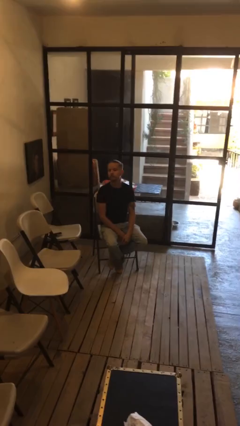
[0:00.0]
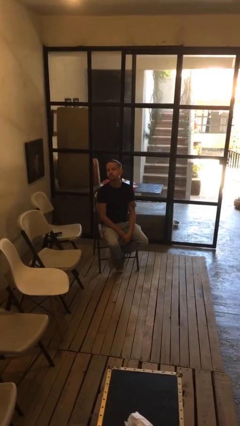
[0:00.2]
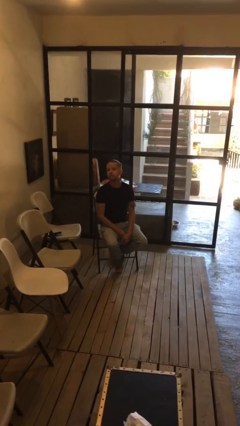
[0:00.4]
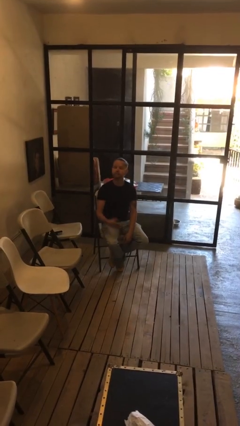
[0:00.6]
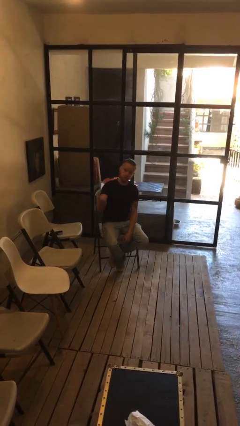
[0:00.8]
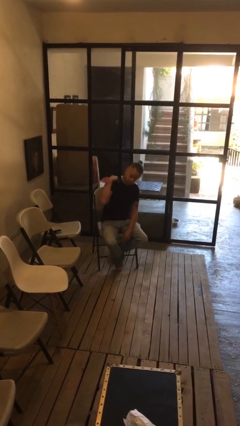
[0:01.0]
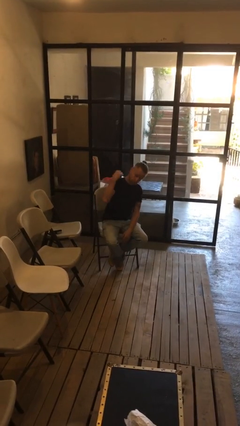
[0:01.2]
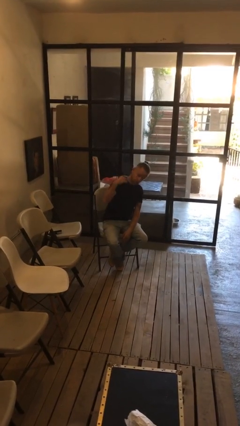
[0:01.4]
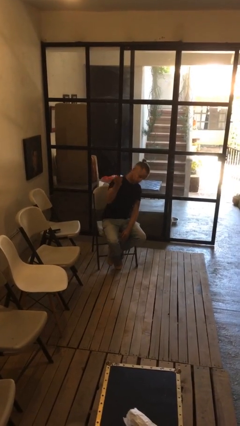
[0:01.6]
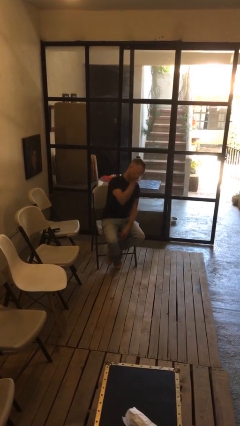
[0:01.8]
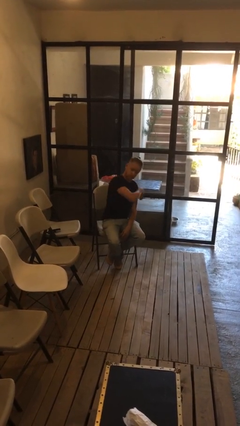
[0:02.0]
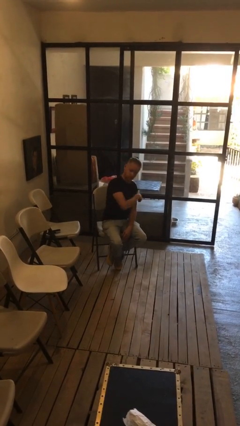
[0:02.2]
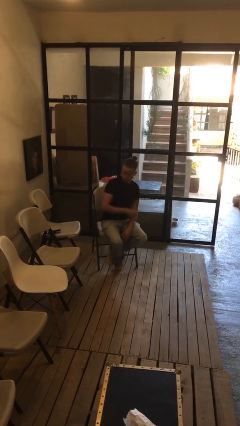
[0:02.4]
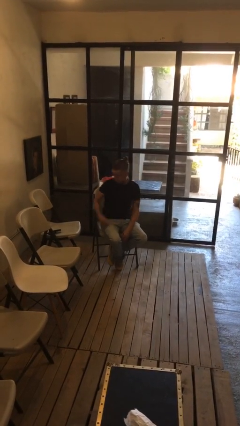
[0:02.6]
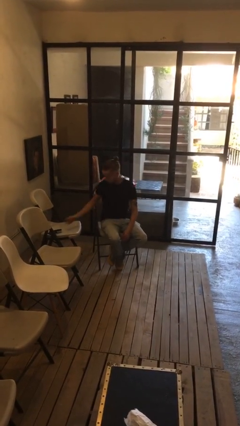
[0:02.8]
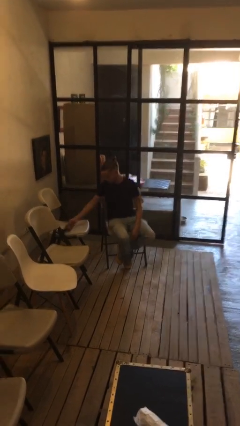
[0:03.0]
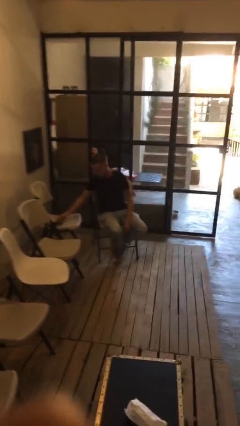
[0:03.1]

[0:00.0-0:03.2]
person gestures come here

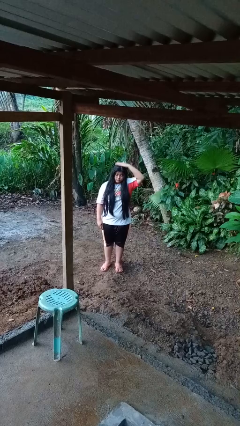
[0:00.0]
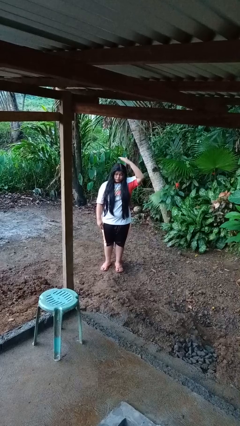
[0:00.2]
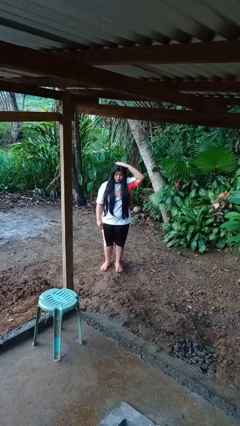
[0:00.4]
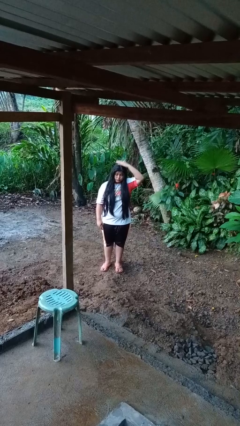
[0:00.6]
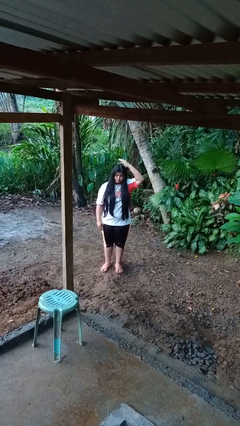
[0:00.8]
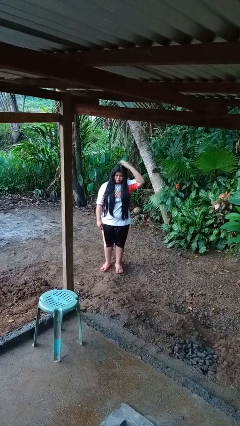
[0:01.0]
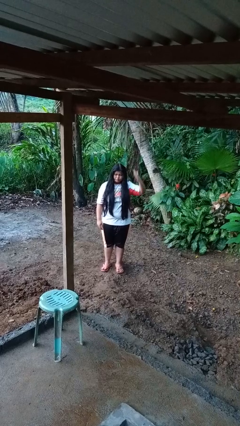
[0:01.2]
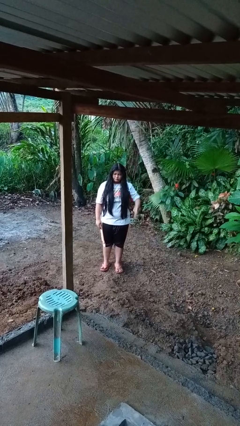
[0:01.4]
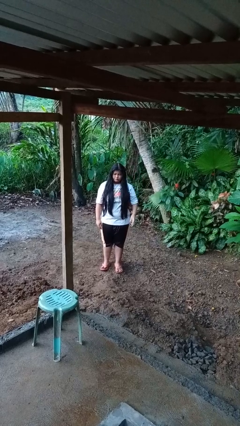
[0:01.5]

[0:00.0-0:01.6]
person pats head

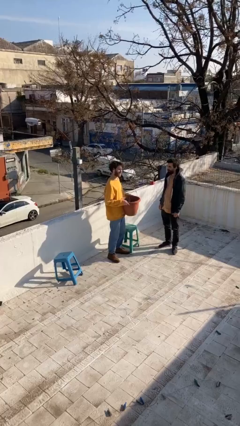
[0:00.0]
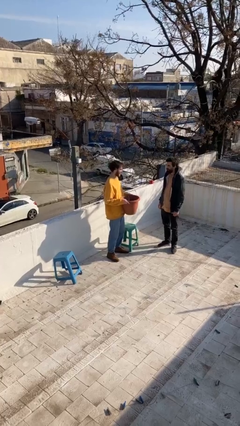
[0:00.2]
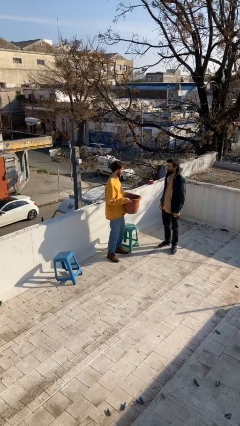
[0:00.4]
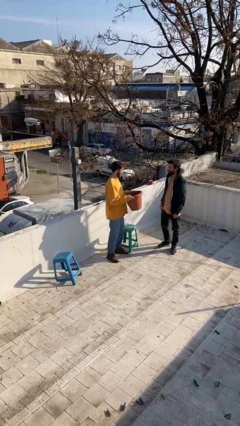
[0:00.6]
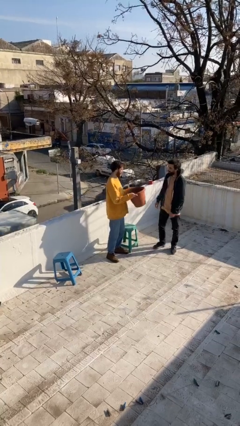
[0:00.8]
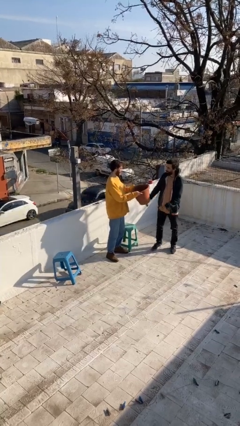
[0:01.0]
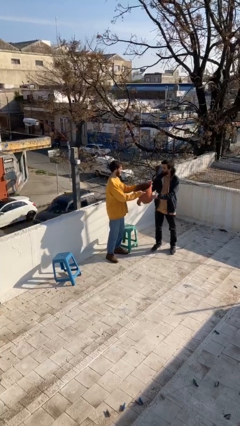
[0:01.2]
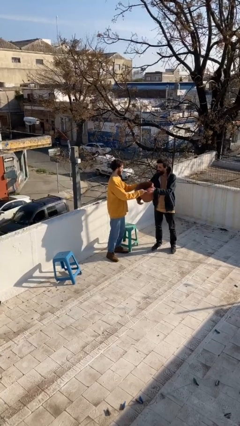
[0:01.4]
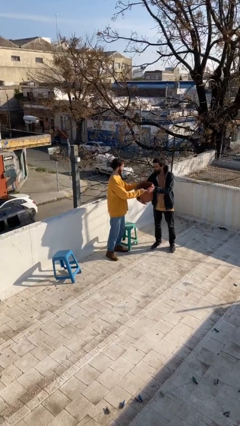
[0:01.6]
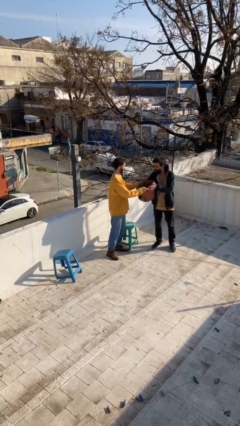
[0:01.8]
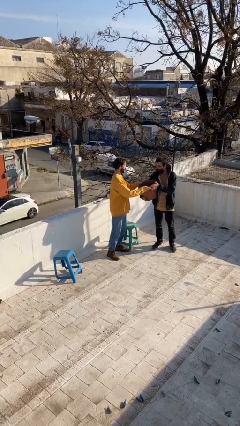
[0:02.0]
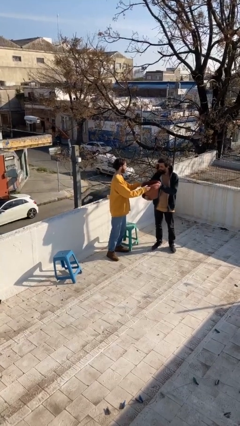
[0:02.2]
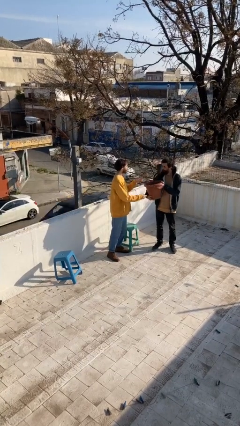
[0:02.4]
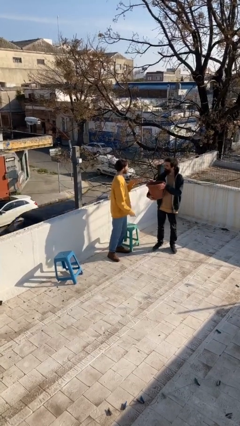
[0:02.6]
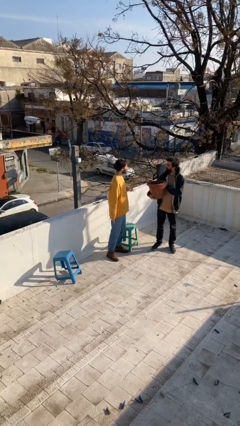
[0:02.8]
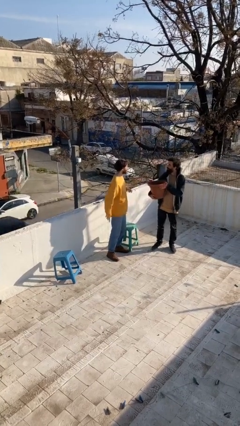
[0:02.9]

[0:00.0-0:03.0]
person transfers object to person

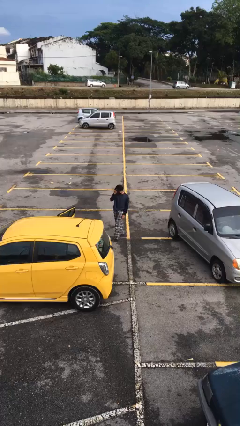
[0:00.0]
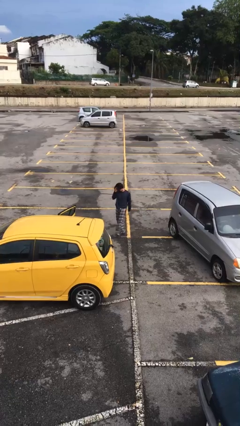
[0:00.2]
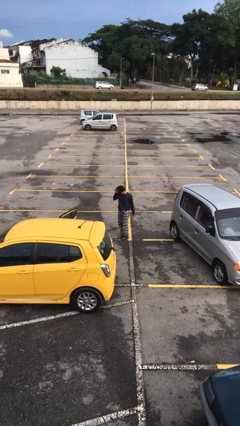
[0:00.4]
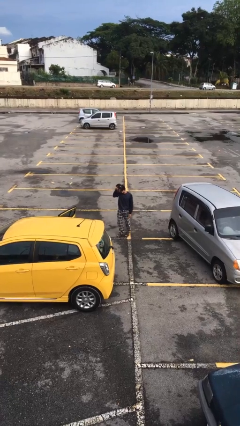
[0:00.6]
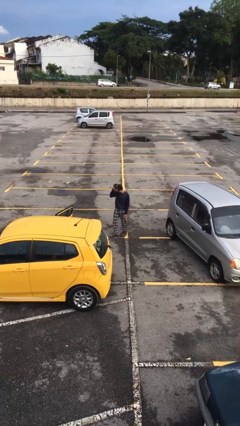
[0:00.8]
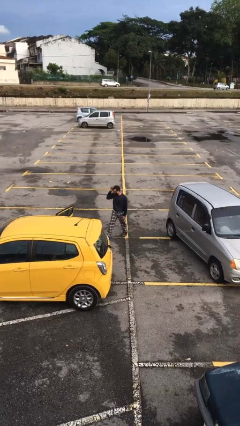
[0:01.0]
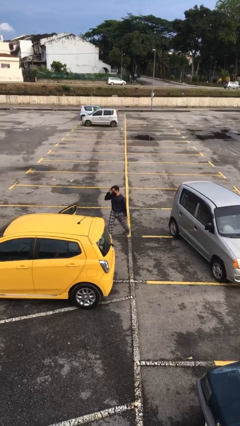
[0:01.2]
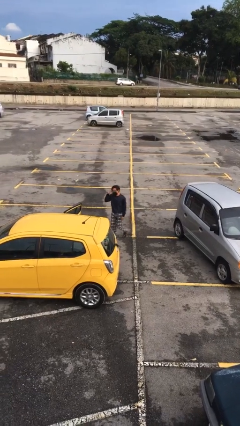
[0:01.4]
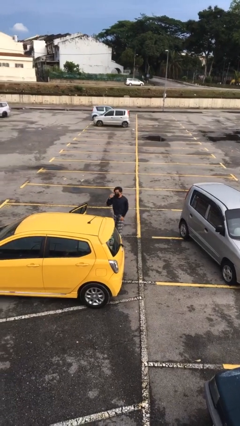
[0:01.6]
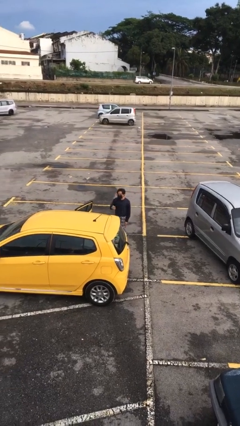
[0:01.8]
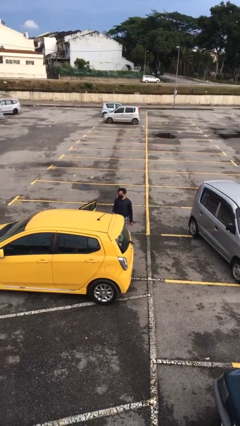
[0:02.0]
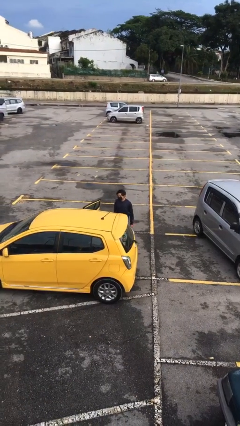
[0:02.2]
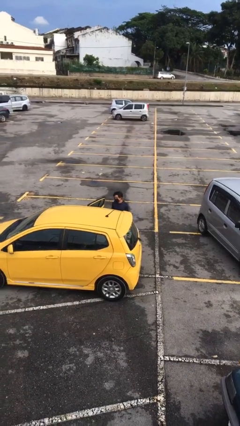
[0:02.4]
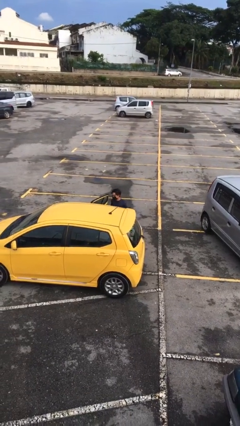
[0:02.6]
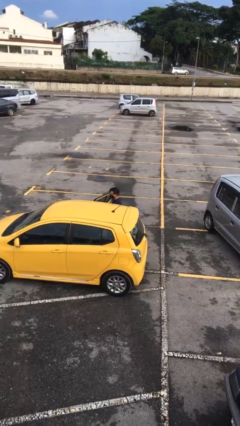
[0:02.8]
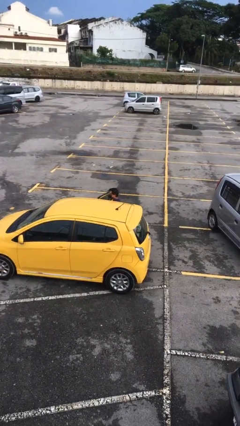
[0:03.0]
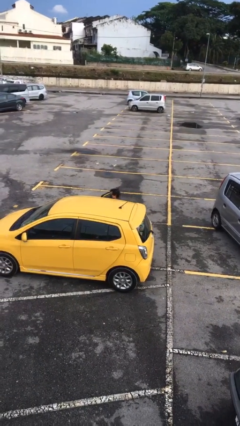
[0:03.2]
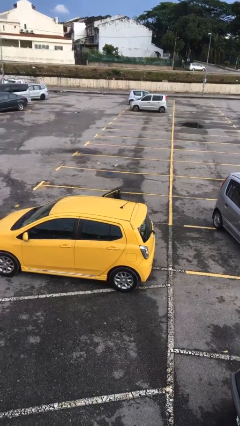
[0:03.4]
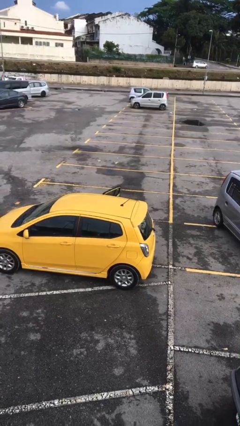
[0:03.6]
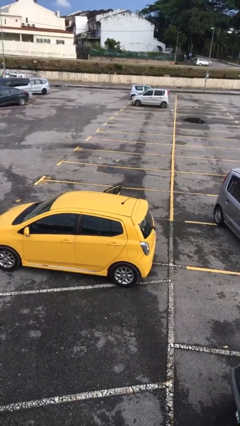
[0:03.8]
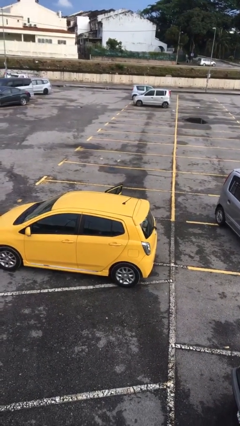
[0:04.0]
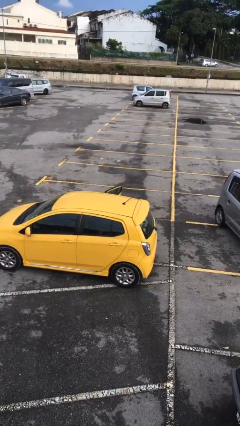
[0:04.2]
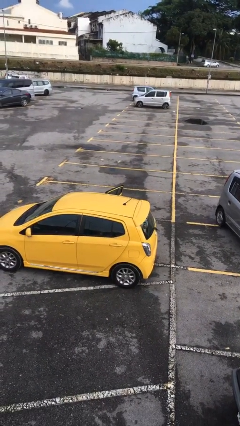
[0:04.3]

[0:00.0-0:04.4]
person enters car

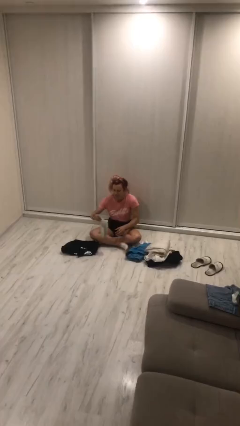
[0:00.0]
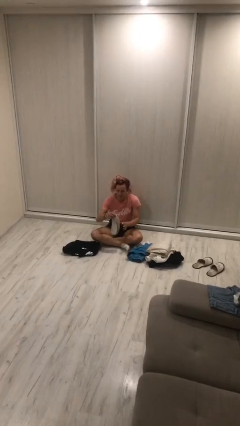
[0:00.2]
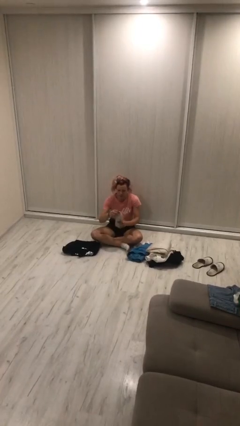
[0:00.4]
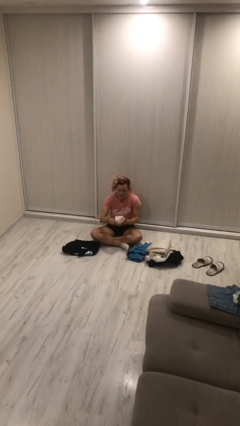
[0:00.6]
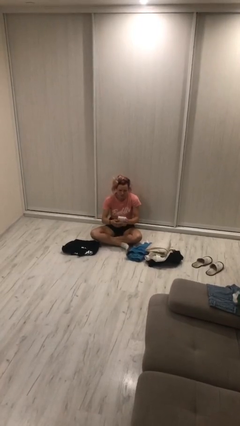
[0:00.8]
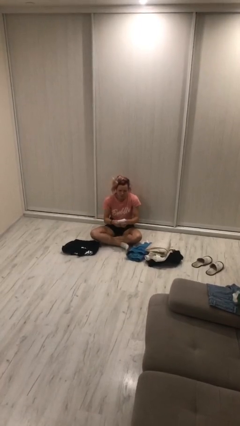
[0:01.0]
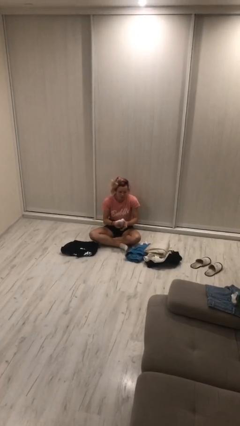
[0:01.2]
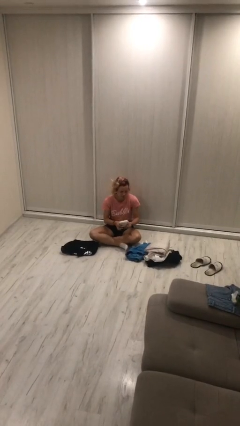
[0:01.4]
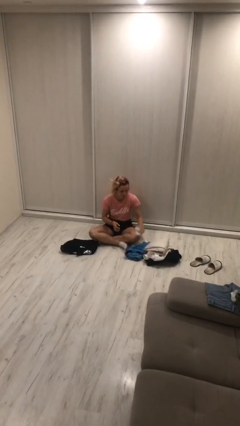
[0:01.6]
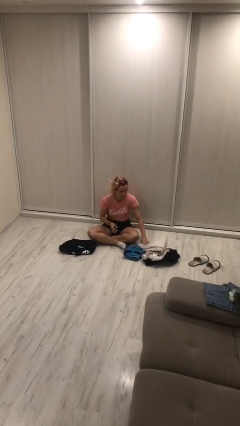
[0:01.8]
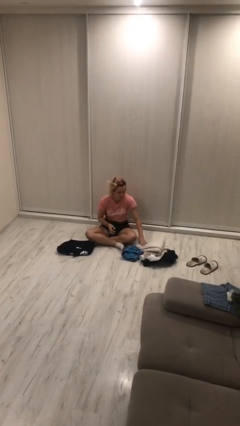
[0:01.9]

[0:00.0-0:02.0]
person folds socks

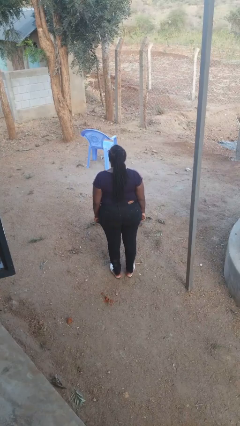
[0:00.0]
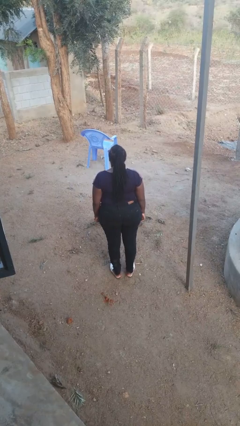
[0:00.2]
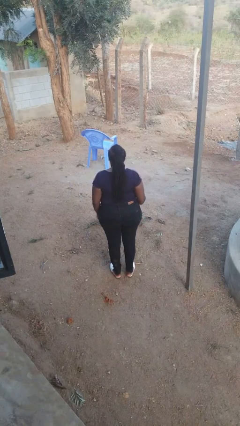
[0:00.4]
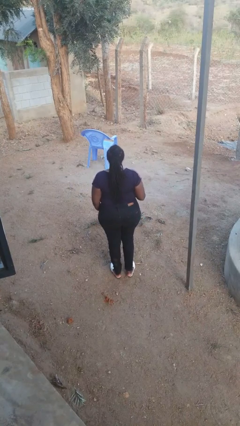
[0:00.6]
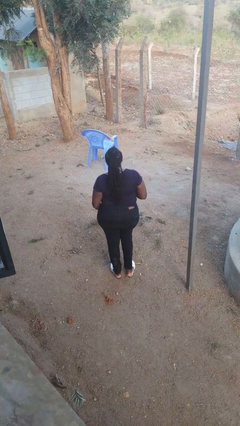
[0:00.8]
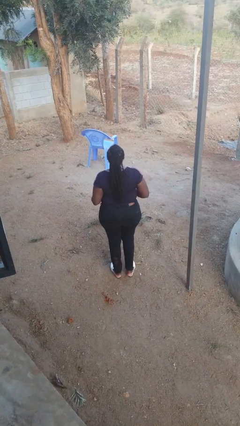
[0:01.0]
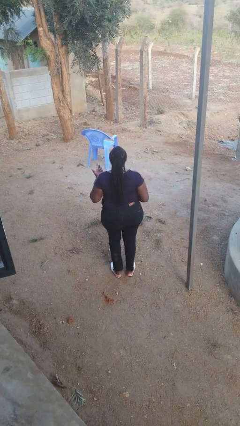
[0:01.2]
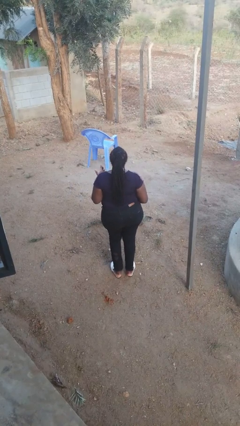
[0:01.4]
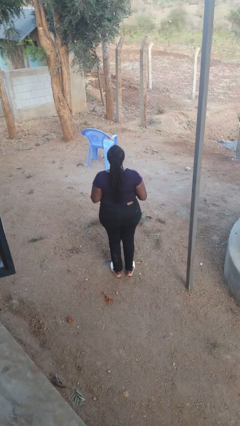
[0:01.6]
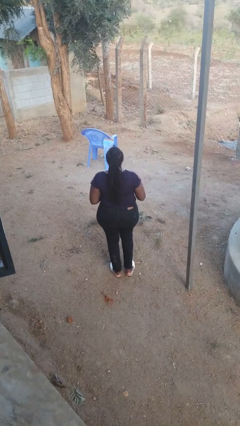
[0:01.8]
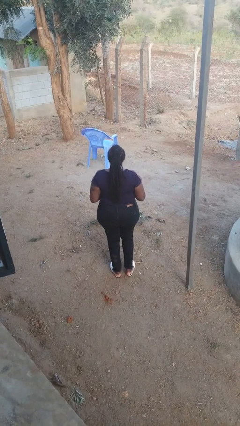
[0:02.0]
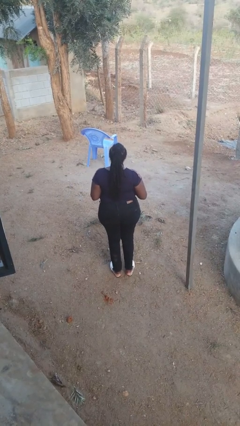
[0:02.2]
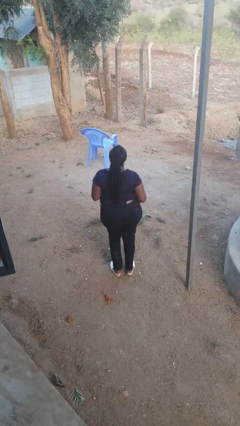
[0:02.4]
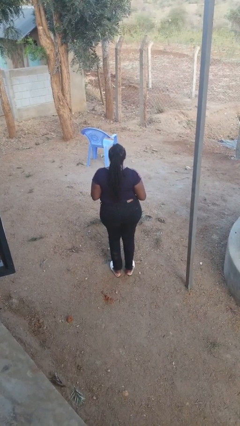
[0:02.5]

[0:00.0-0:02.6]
person wiggles hips

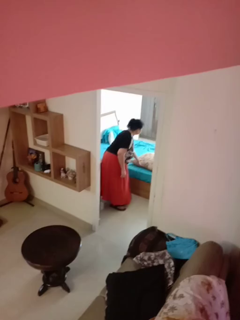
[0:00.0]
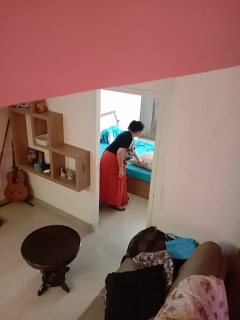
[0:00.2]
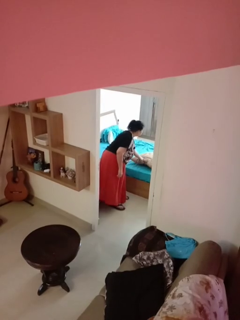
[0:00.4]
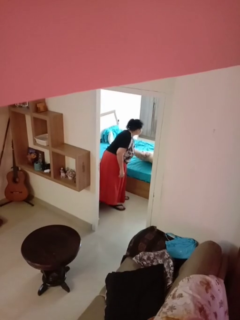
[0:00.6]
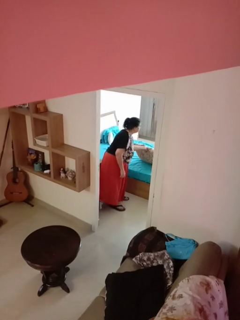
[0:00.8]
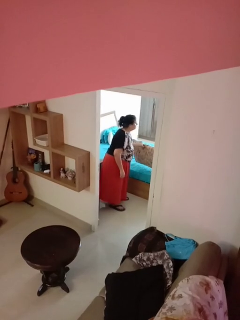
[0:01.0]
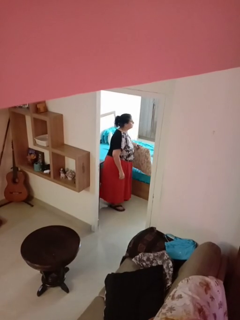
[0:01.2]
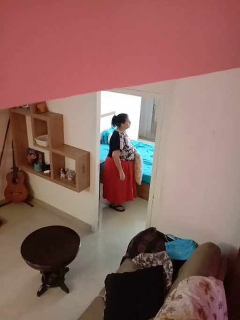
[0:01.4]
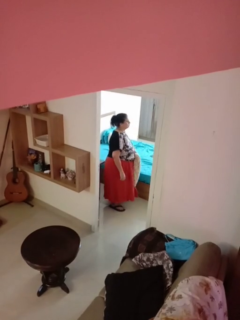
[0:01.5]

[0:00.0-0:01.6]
person picks up object from bed
